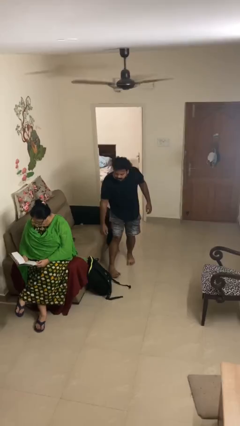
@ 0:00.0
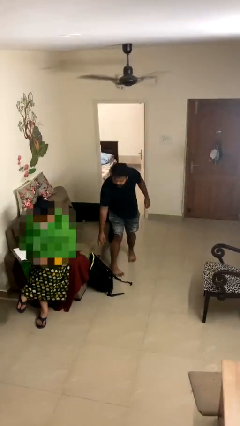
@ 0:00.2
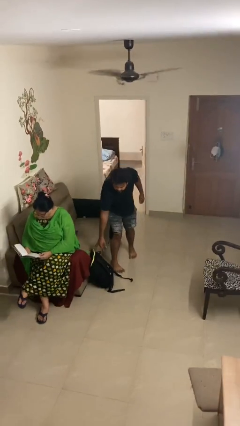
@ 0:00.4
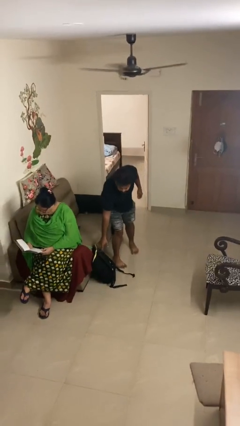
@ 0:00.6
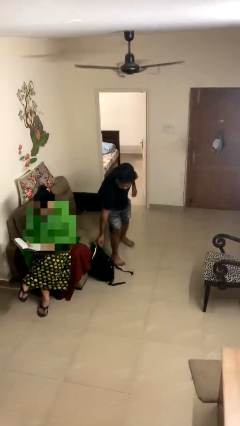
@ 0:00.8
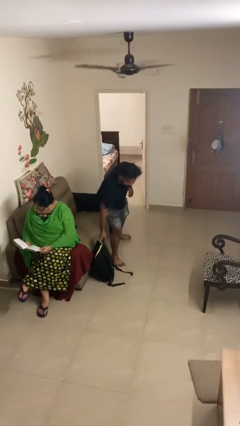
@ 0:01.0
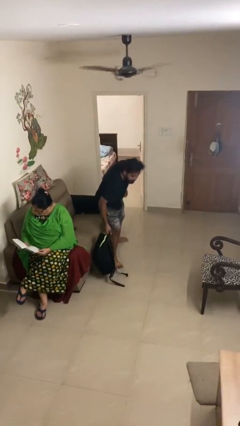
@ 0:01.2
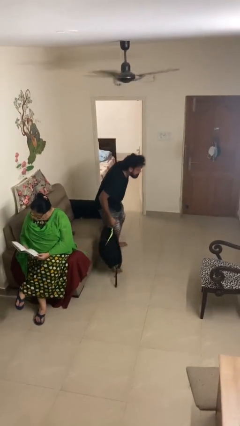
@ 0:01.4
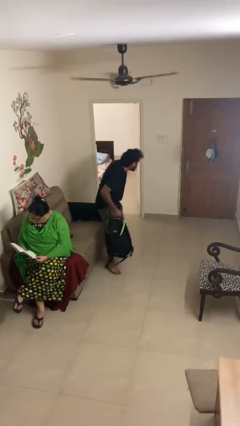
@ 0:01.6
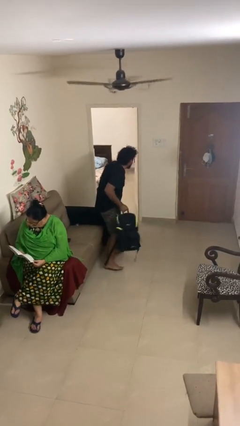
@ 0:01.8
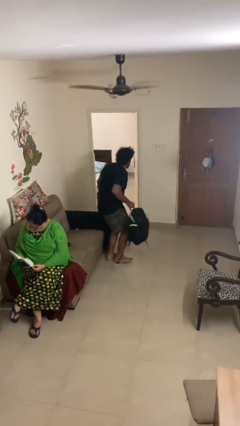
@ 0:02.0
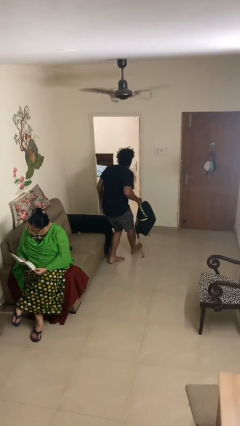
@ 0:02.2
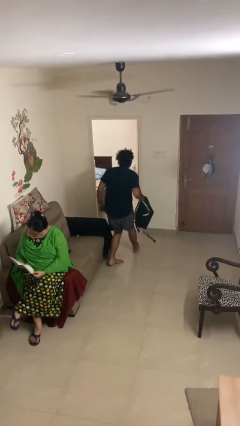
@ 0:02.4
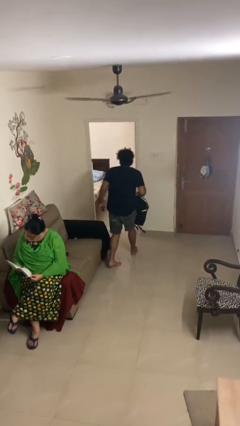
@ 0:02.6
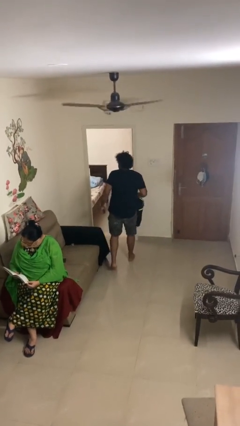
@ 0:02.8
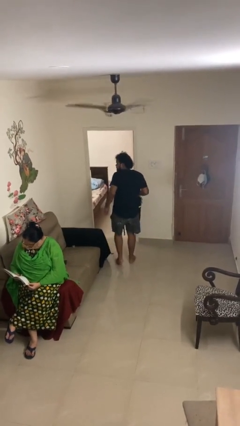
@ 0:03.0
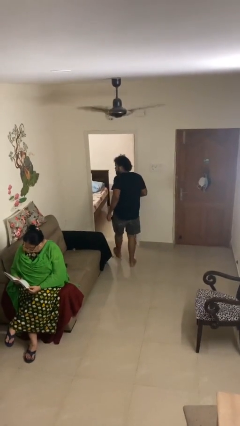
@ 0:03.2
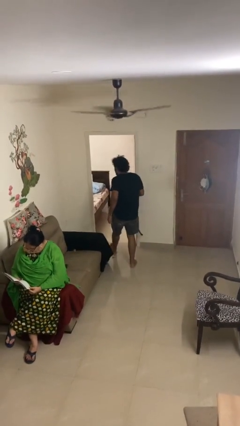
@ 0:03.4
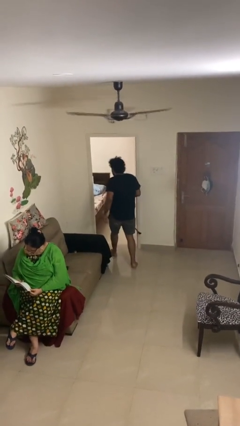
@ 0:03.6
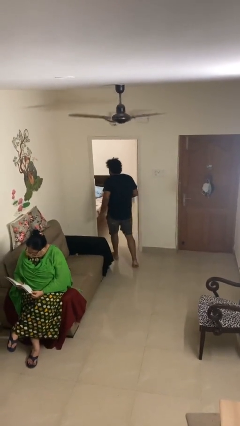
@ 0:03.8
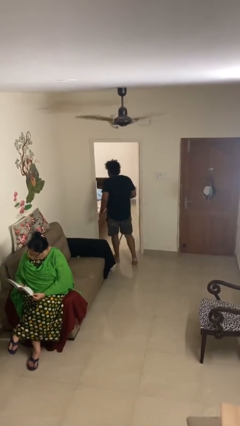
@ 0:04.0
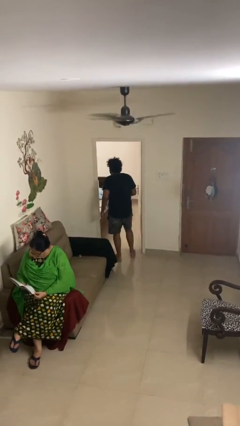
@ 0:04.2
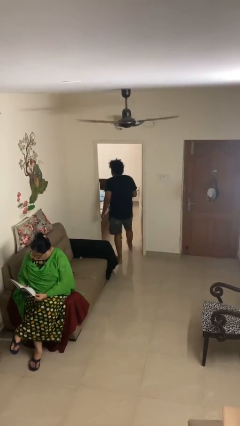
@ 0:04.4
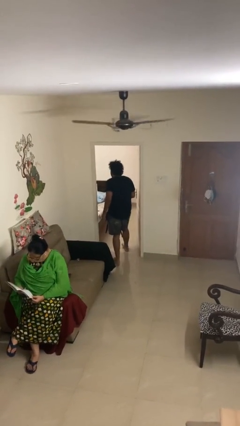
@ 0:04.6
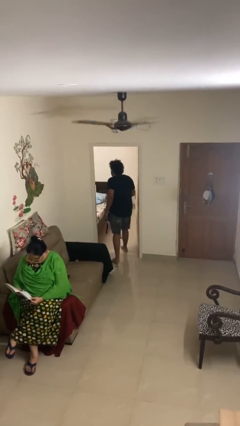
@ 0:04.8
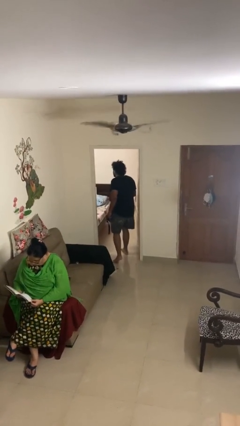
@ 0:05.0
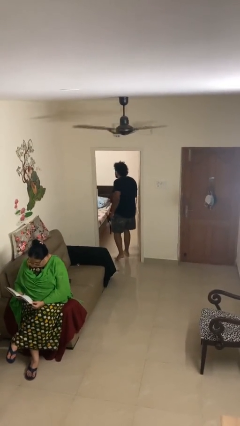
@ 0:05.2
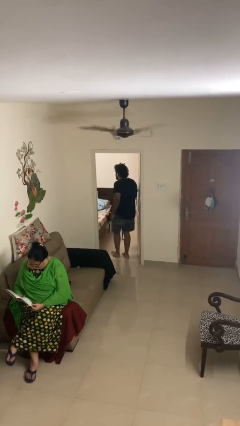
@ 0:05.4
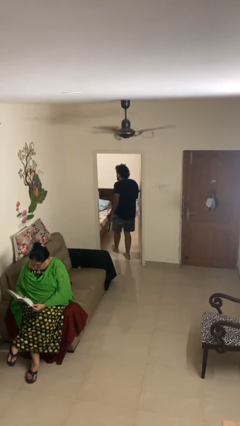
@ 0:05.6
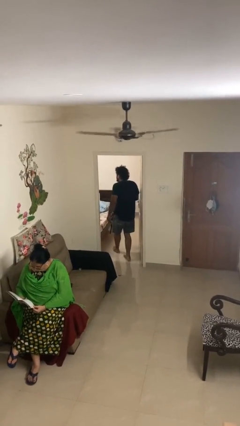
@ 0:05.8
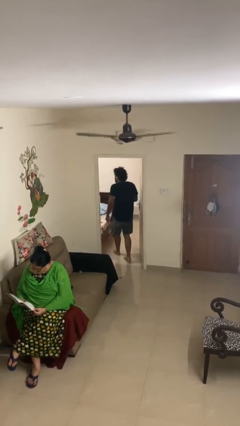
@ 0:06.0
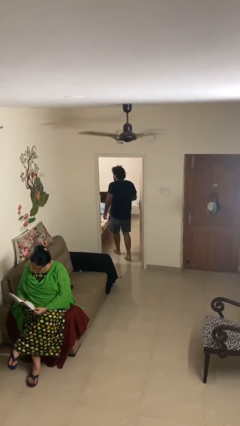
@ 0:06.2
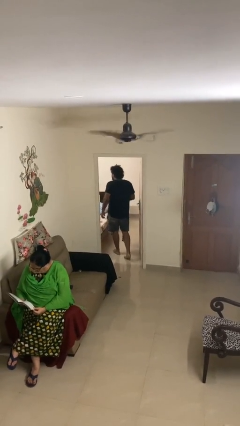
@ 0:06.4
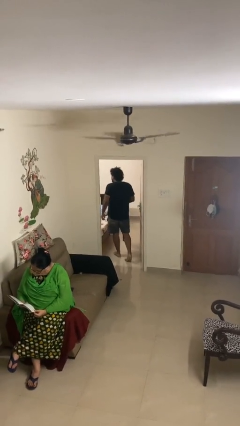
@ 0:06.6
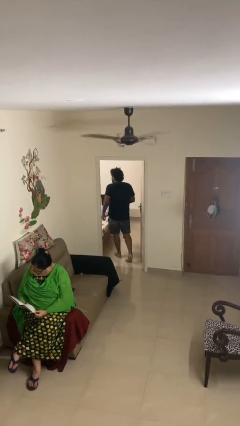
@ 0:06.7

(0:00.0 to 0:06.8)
person steals object from person

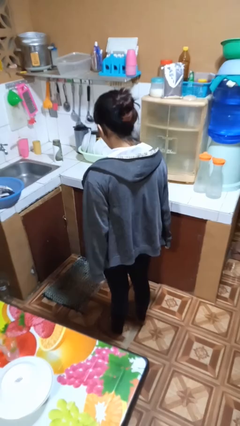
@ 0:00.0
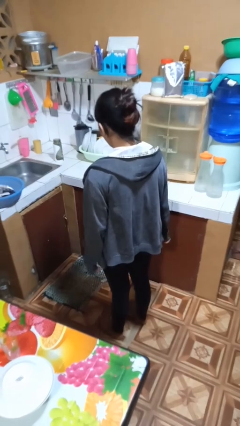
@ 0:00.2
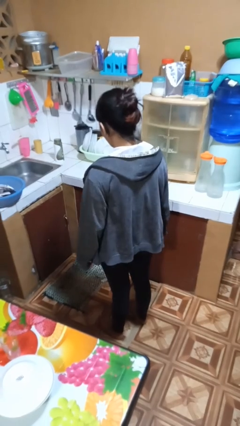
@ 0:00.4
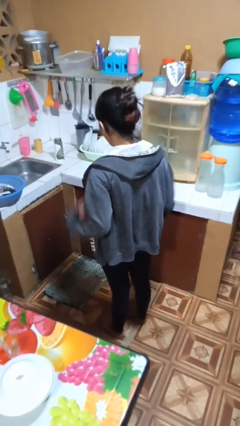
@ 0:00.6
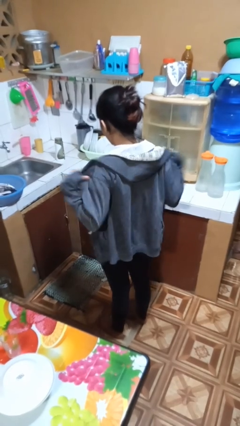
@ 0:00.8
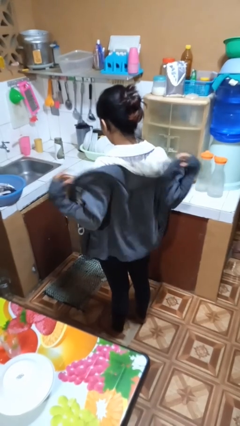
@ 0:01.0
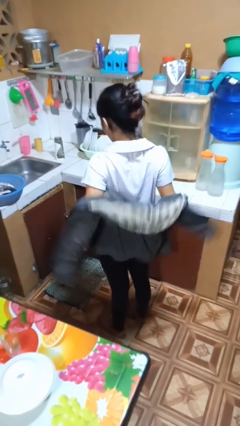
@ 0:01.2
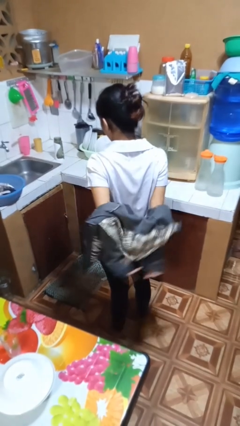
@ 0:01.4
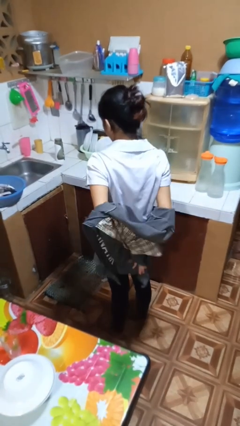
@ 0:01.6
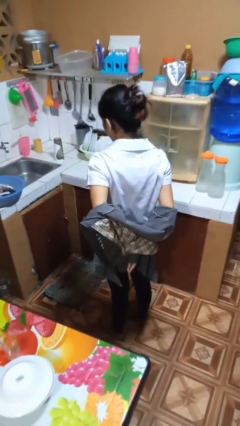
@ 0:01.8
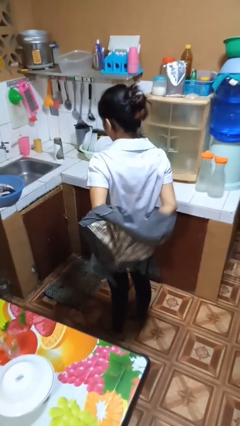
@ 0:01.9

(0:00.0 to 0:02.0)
person takes off jacket

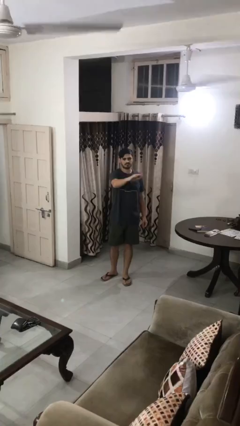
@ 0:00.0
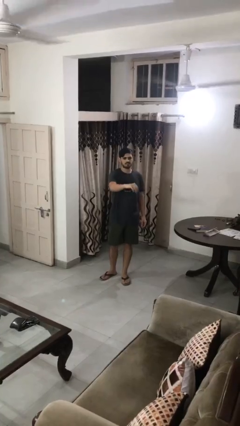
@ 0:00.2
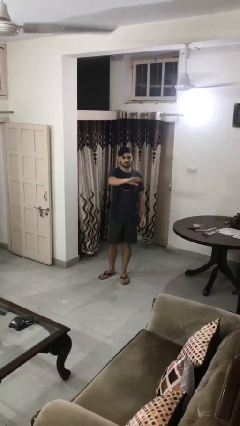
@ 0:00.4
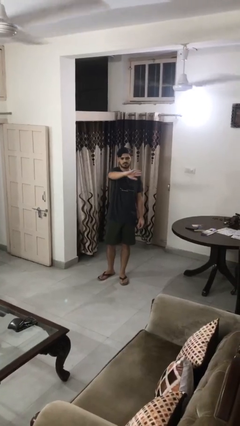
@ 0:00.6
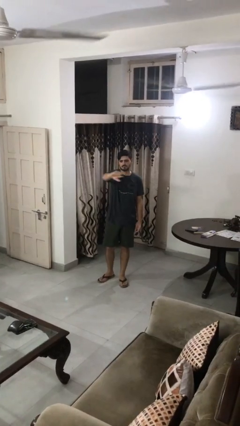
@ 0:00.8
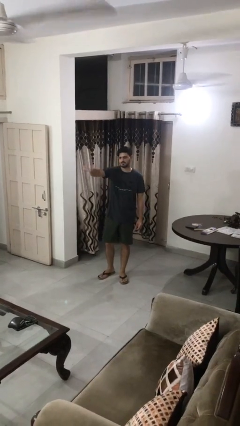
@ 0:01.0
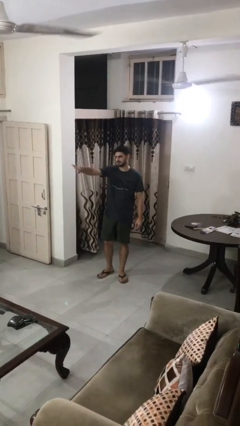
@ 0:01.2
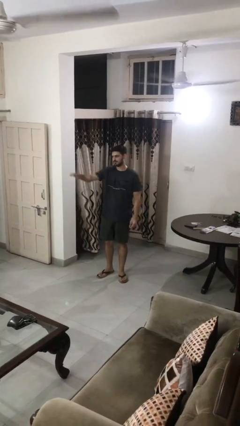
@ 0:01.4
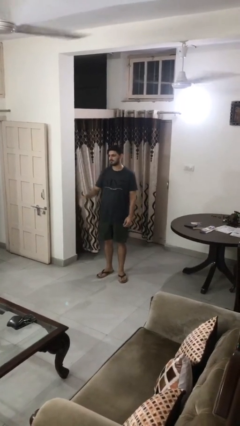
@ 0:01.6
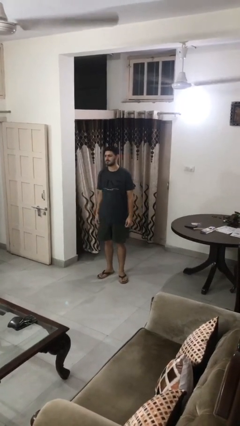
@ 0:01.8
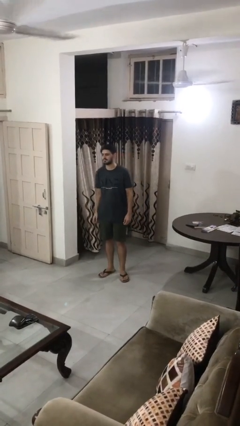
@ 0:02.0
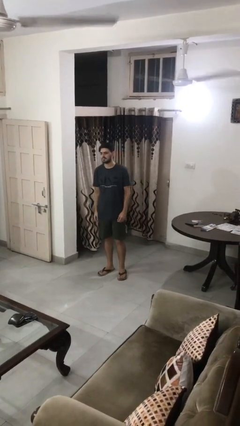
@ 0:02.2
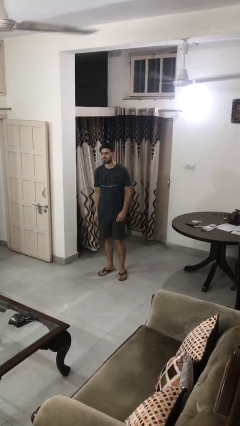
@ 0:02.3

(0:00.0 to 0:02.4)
person gestures swipe right

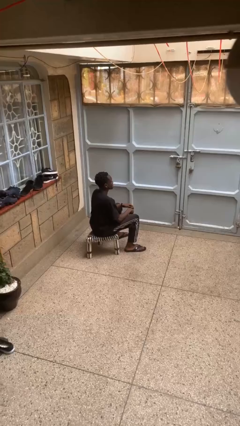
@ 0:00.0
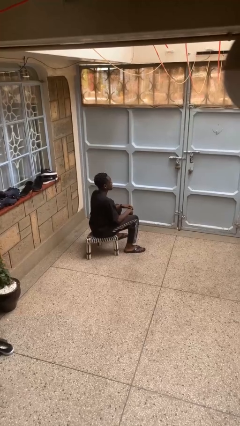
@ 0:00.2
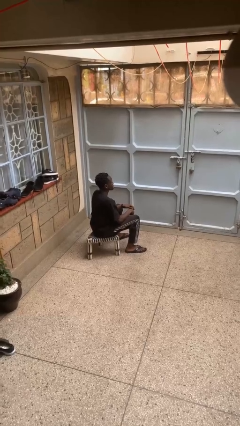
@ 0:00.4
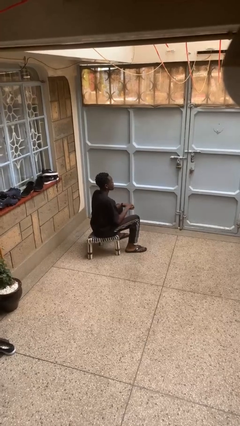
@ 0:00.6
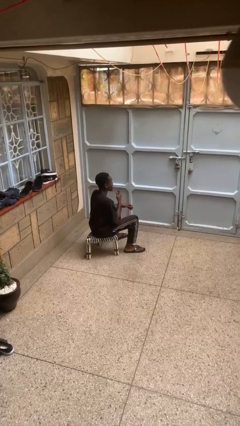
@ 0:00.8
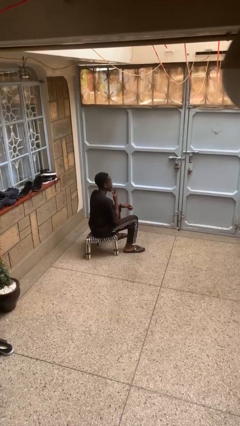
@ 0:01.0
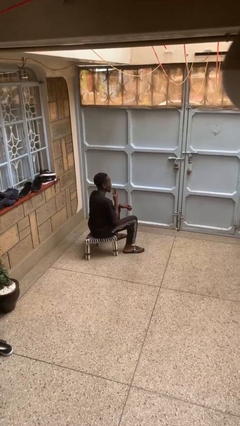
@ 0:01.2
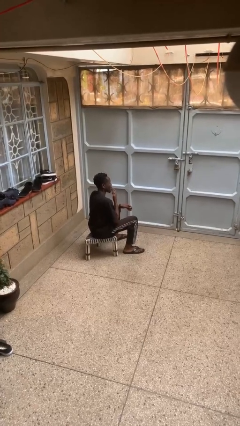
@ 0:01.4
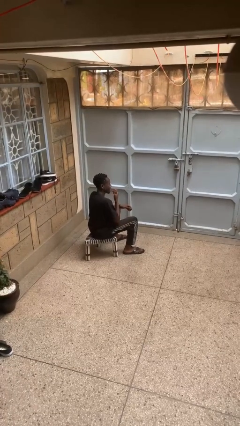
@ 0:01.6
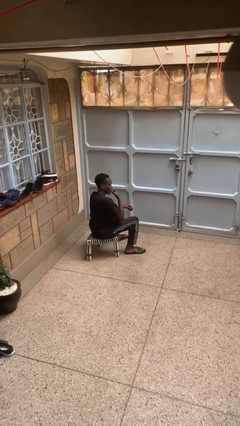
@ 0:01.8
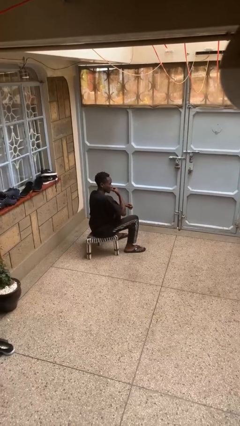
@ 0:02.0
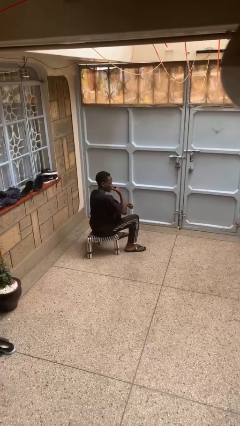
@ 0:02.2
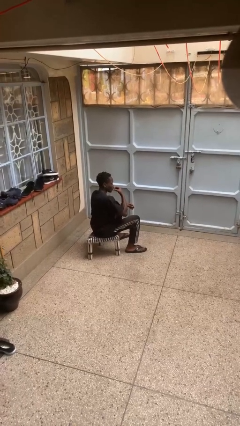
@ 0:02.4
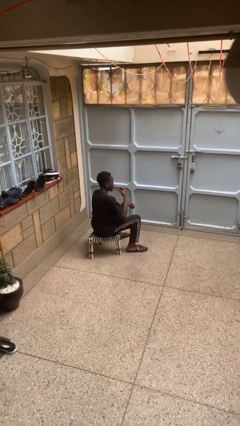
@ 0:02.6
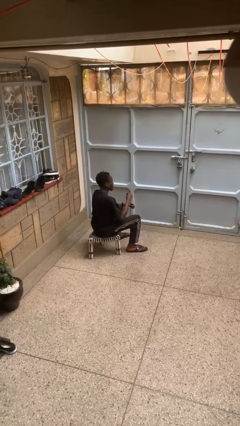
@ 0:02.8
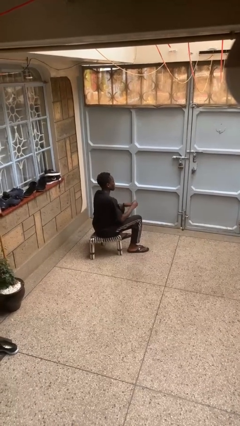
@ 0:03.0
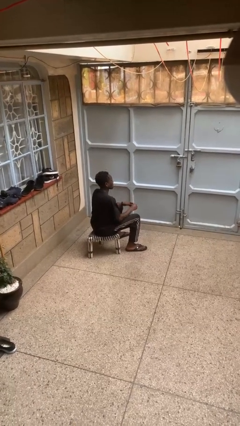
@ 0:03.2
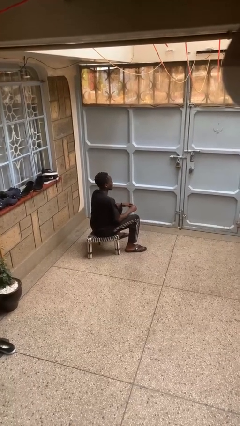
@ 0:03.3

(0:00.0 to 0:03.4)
person licks fingers

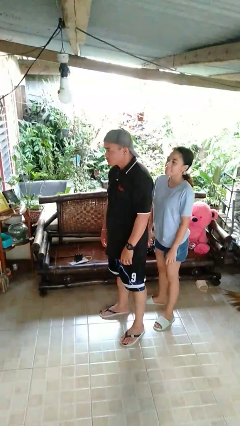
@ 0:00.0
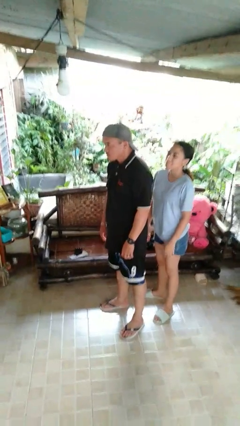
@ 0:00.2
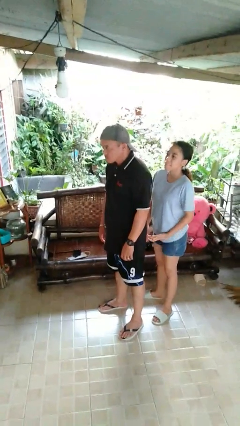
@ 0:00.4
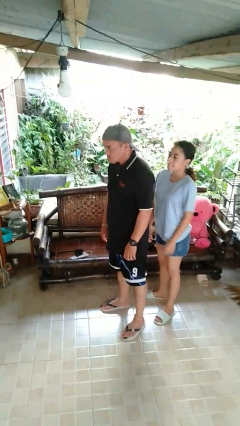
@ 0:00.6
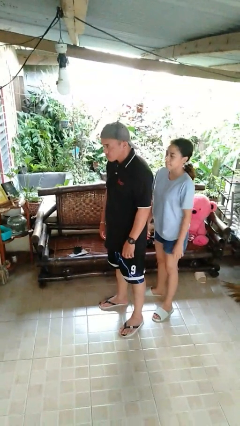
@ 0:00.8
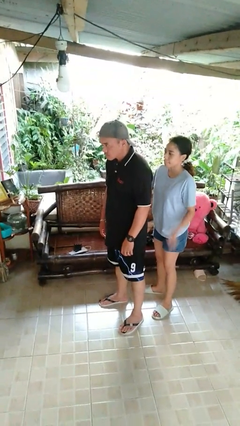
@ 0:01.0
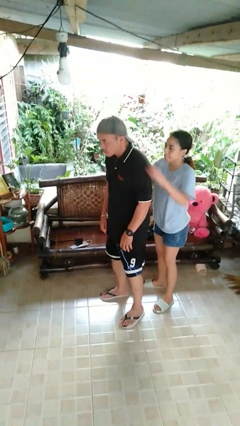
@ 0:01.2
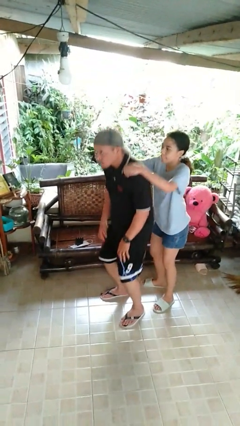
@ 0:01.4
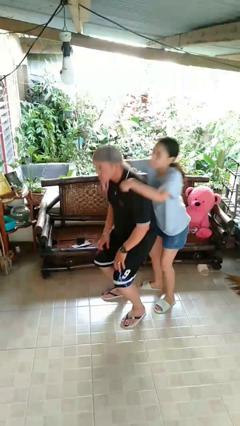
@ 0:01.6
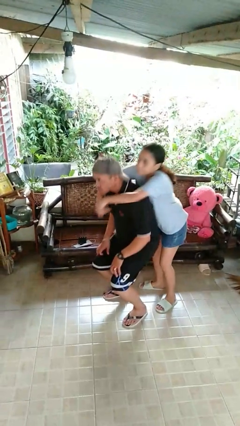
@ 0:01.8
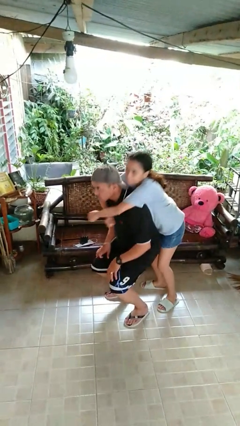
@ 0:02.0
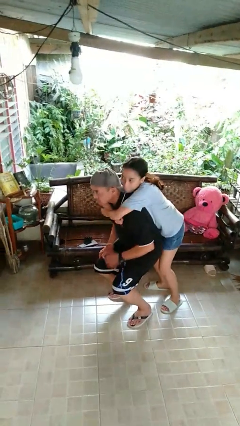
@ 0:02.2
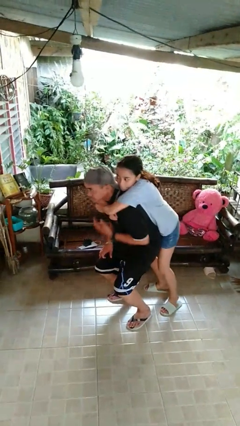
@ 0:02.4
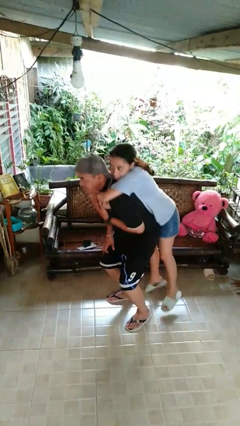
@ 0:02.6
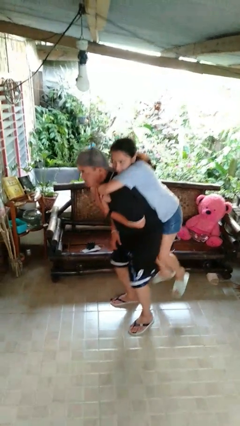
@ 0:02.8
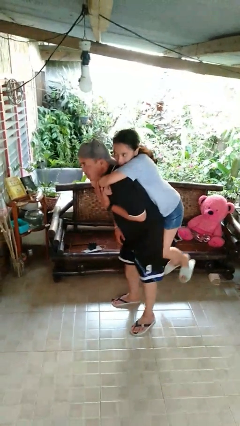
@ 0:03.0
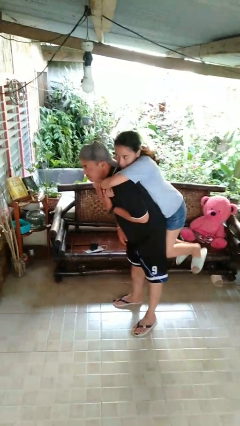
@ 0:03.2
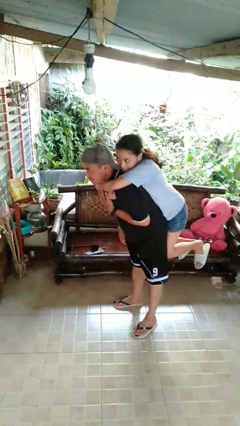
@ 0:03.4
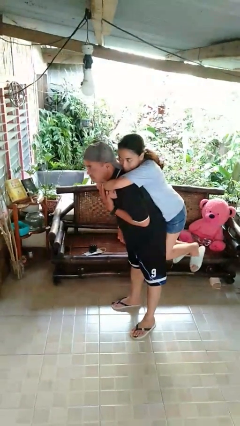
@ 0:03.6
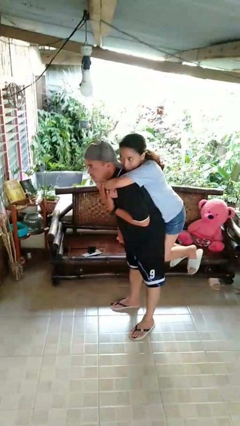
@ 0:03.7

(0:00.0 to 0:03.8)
person picks up person
